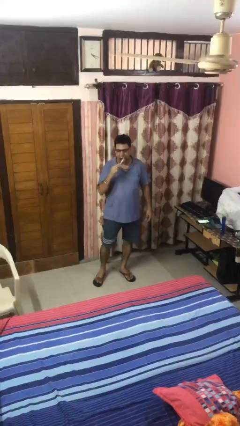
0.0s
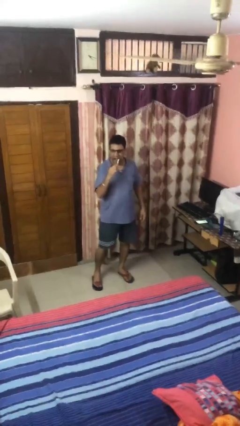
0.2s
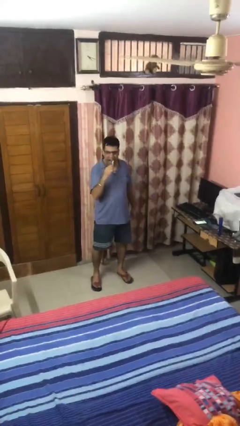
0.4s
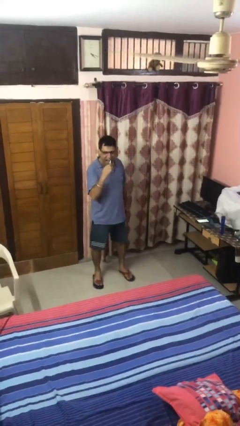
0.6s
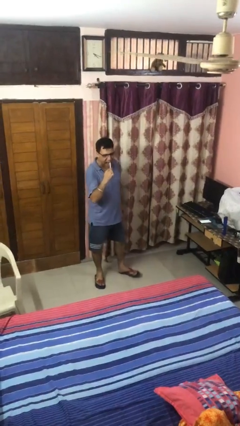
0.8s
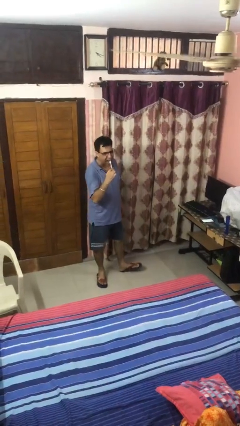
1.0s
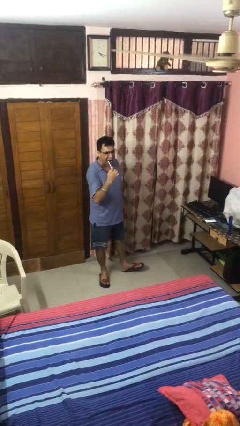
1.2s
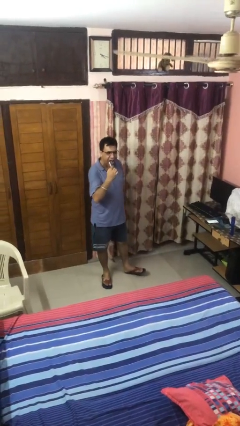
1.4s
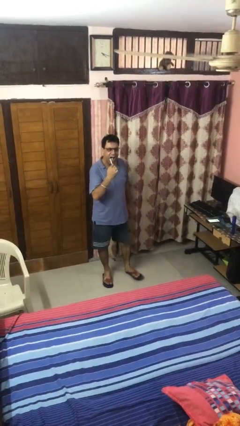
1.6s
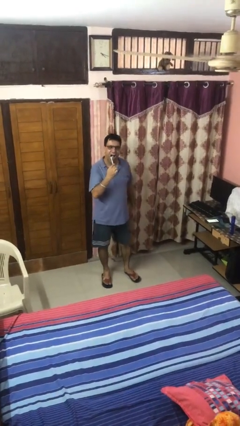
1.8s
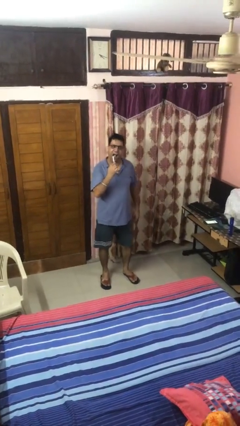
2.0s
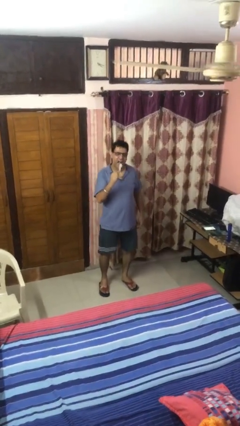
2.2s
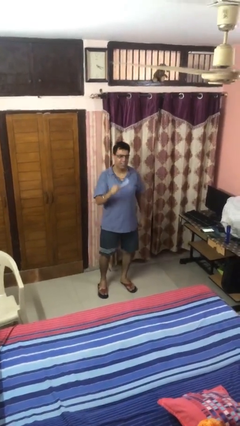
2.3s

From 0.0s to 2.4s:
person brushes teeth

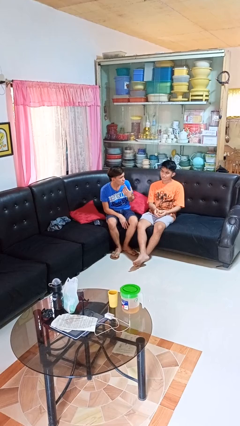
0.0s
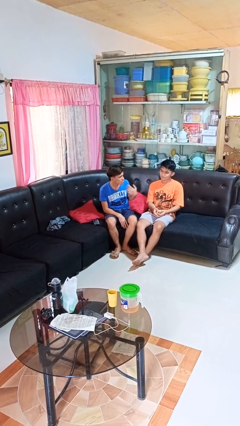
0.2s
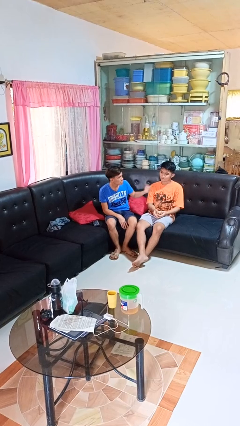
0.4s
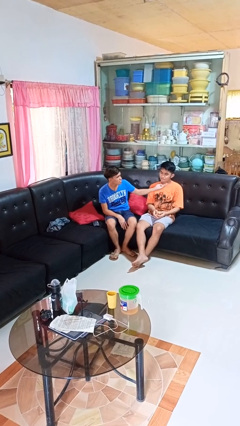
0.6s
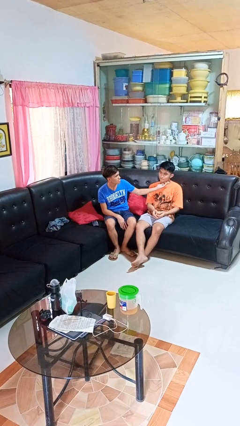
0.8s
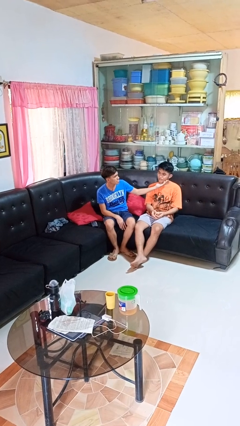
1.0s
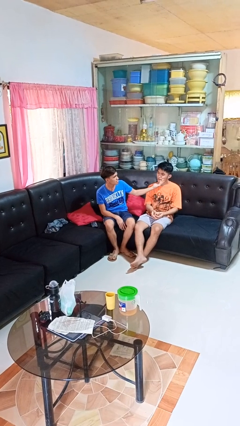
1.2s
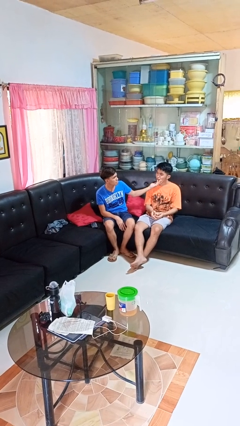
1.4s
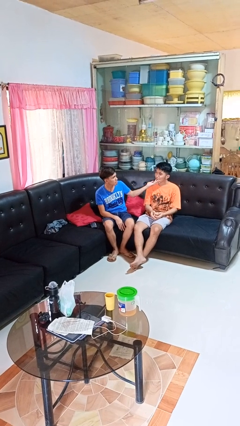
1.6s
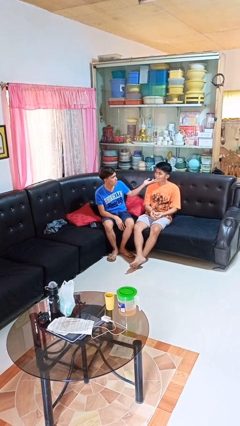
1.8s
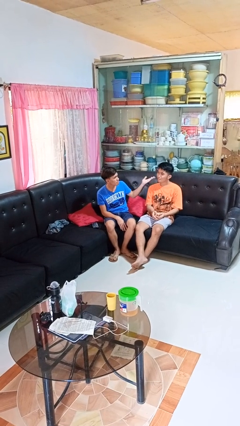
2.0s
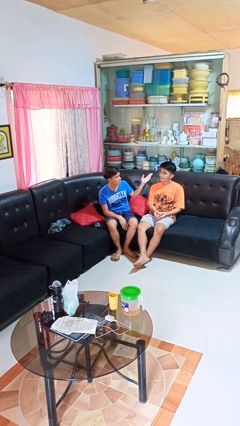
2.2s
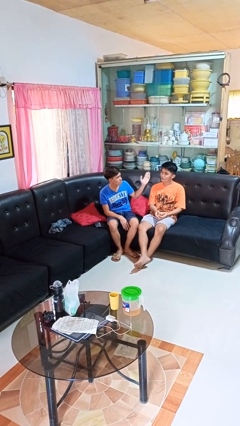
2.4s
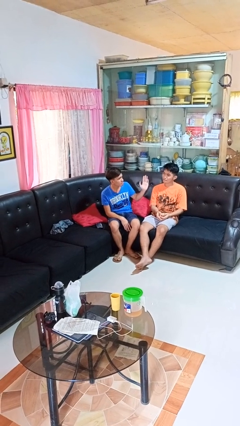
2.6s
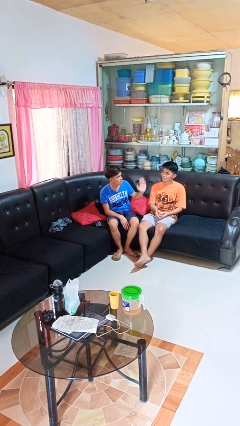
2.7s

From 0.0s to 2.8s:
person touches face of person

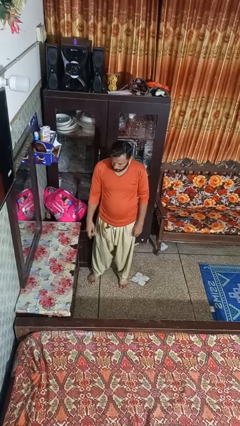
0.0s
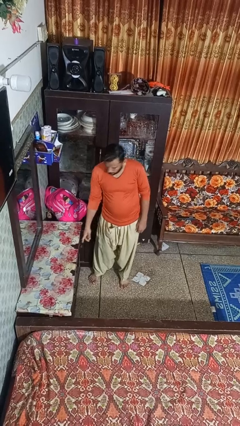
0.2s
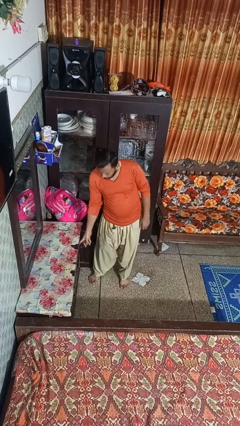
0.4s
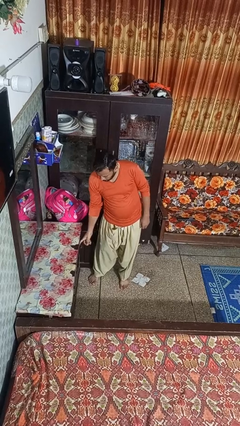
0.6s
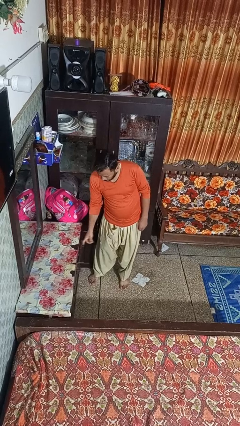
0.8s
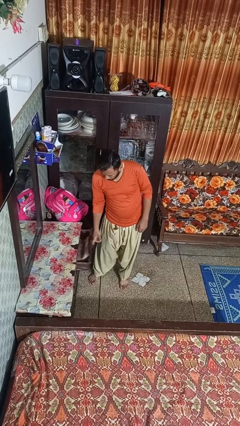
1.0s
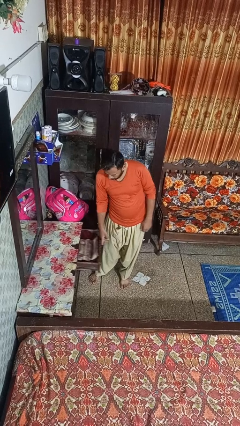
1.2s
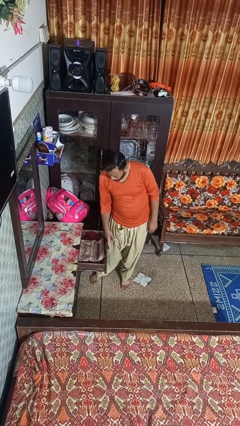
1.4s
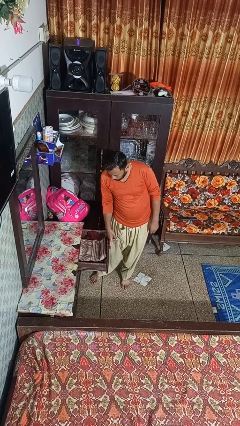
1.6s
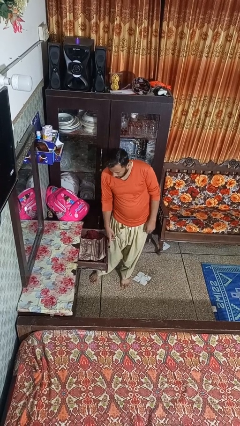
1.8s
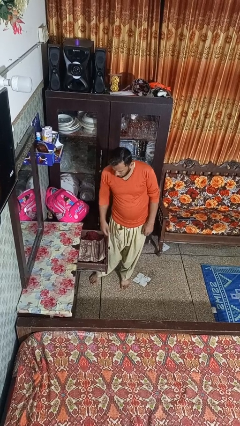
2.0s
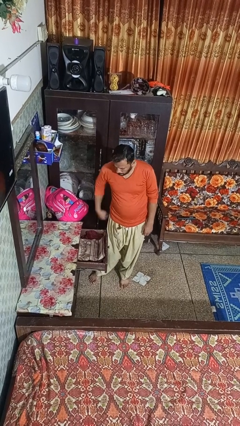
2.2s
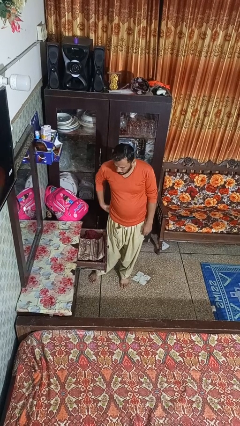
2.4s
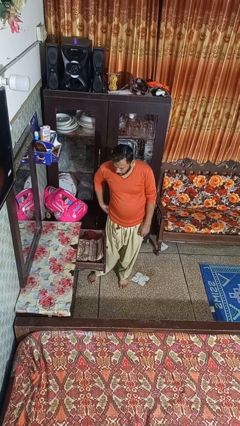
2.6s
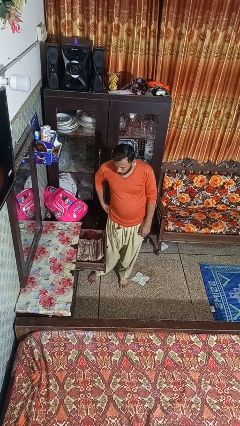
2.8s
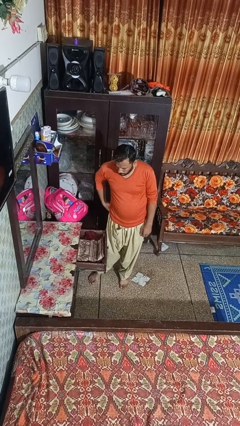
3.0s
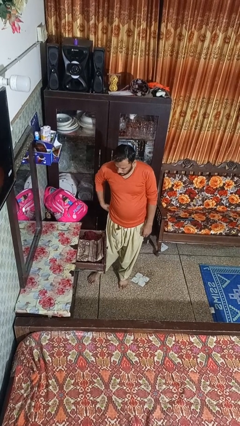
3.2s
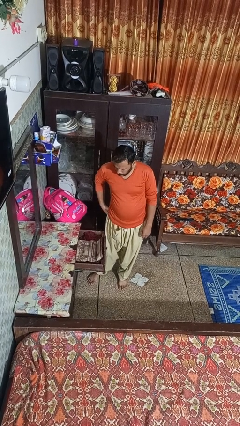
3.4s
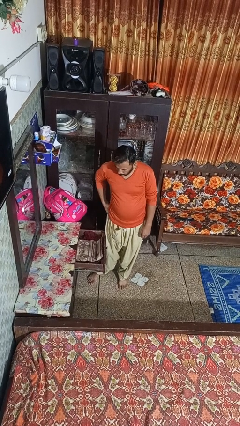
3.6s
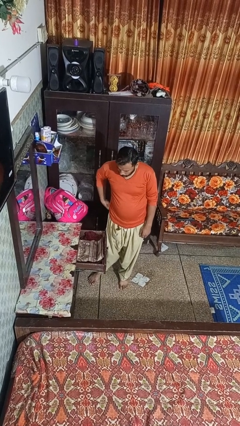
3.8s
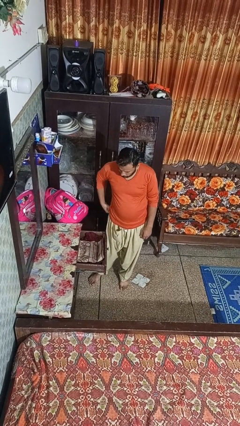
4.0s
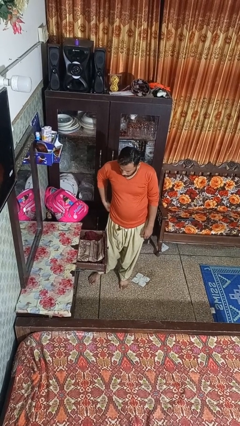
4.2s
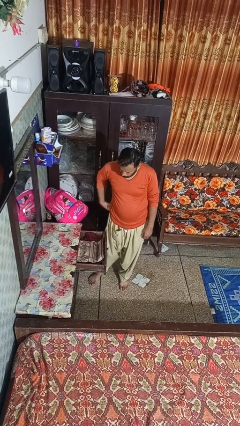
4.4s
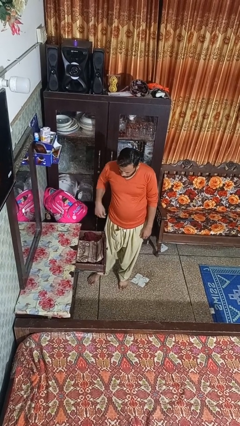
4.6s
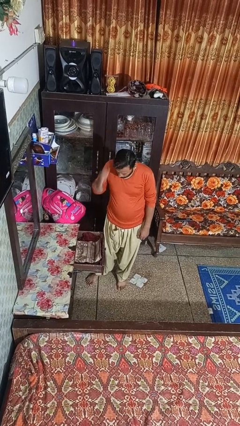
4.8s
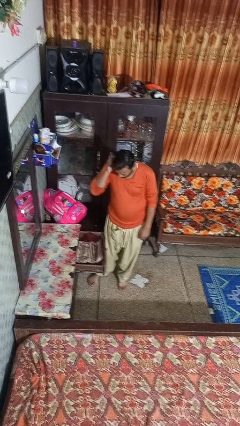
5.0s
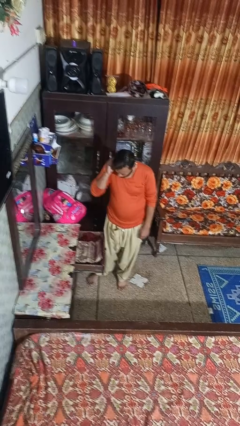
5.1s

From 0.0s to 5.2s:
person opens dresser drawer

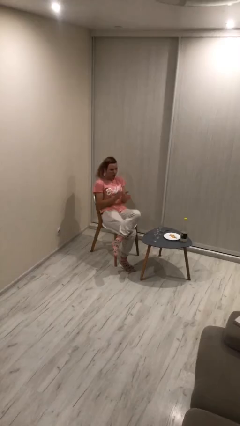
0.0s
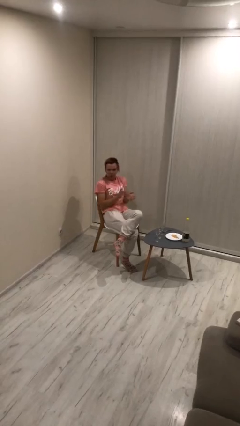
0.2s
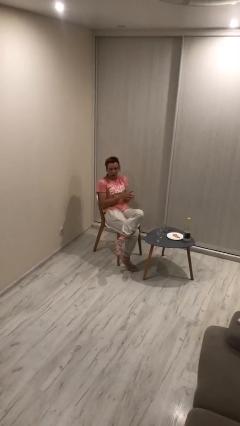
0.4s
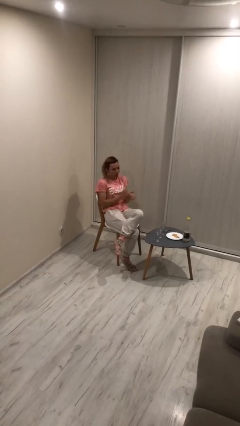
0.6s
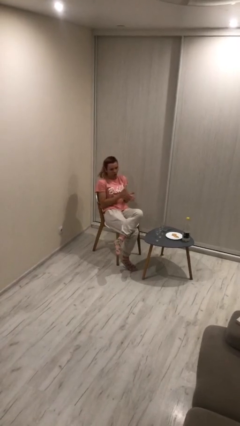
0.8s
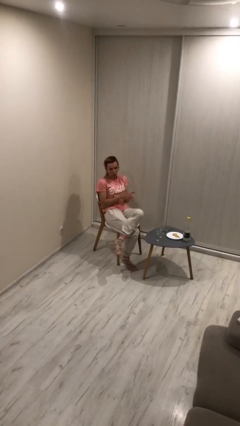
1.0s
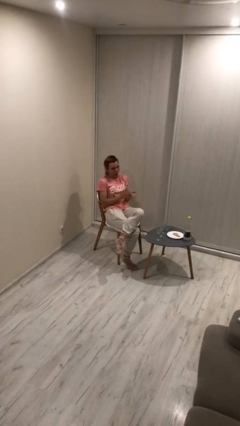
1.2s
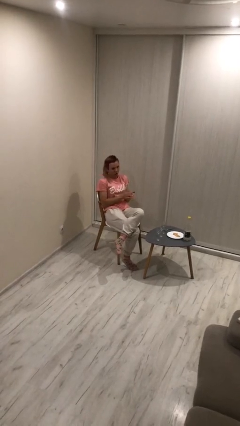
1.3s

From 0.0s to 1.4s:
person claps hands

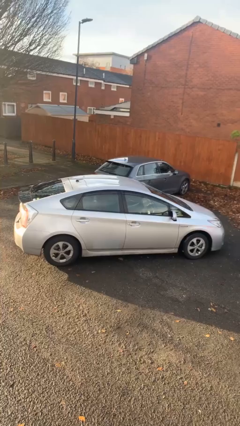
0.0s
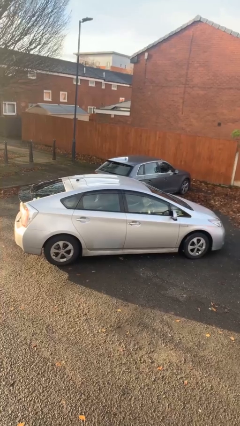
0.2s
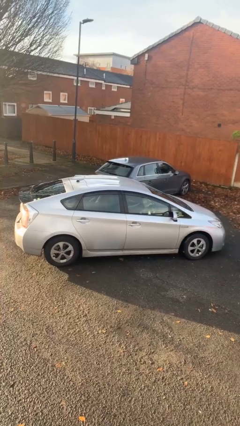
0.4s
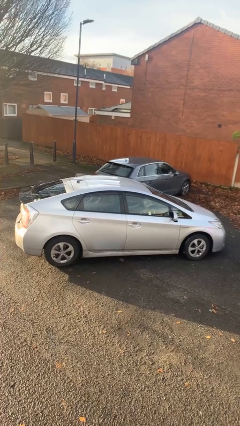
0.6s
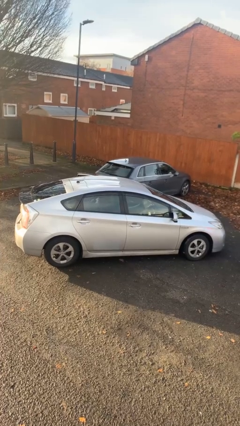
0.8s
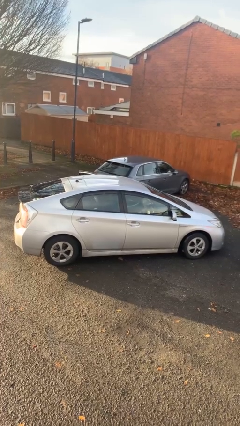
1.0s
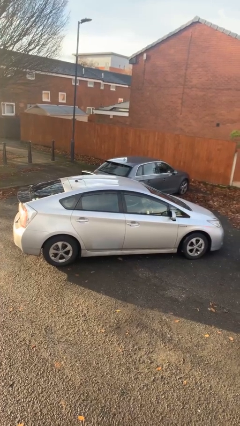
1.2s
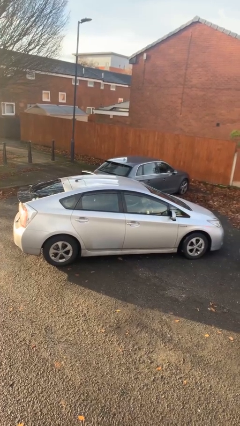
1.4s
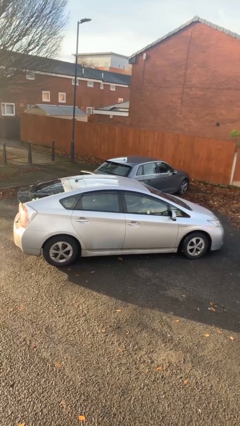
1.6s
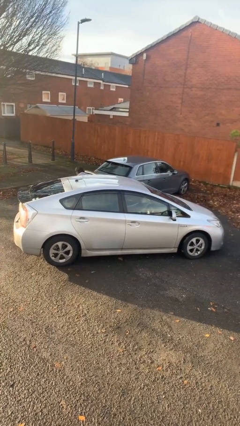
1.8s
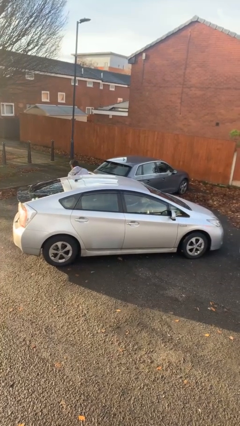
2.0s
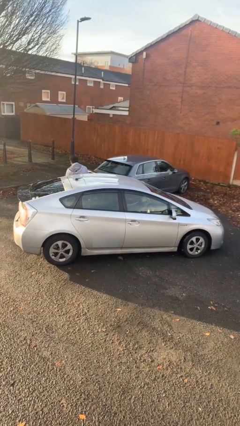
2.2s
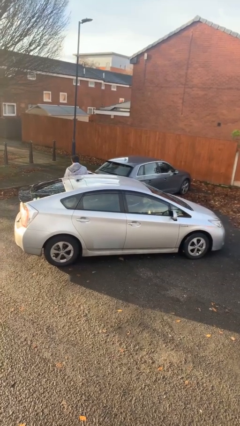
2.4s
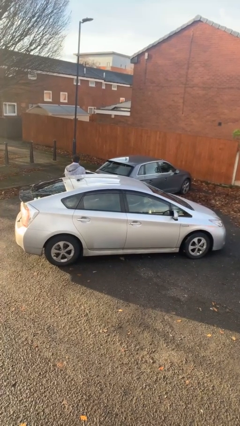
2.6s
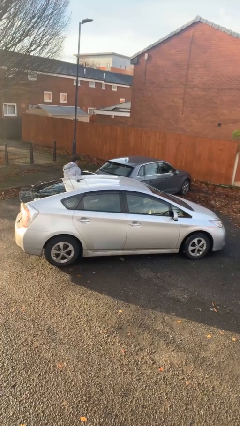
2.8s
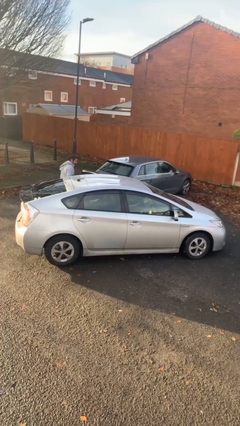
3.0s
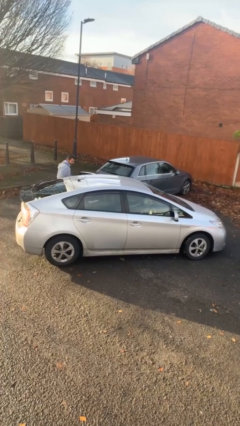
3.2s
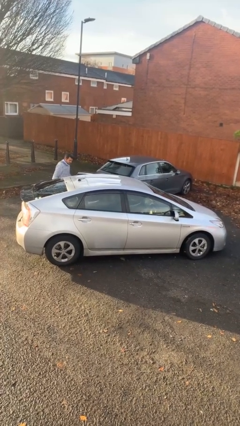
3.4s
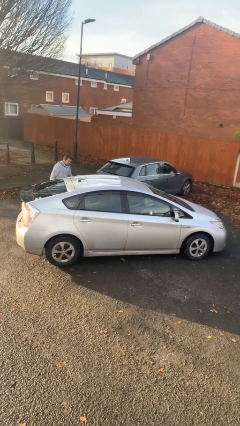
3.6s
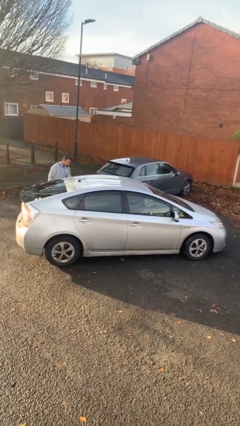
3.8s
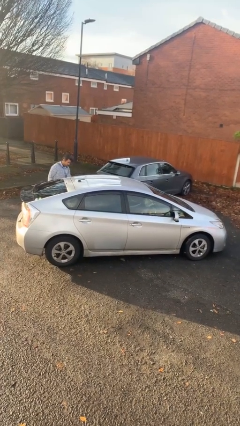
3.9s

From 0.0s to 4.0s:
car drops off person

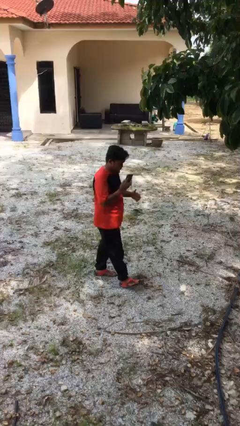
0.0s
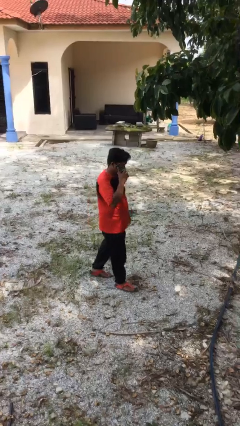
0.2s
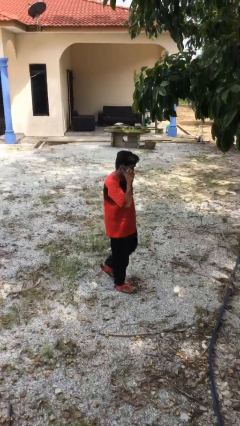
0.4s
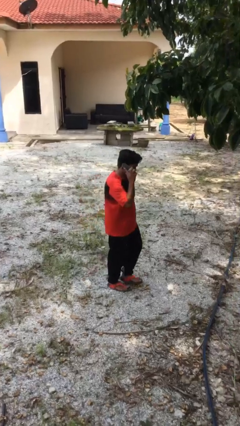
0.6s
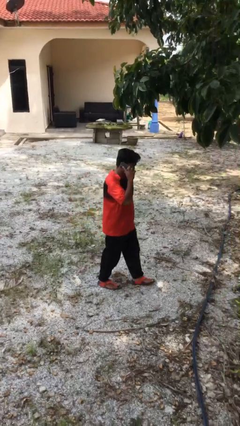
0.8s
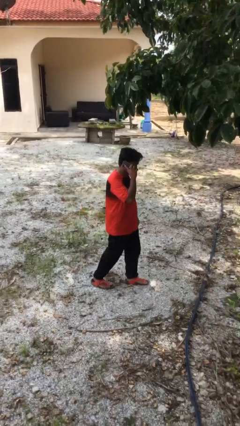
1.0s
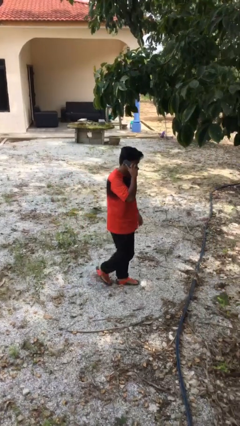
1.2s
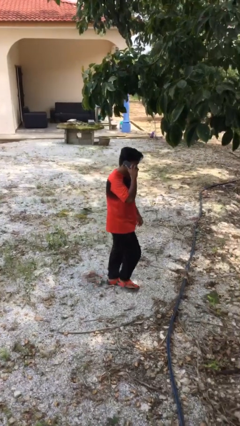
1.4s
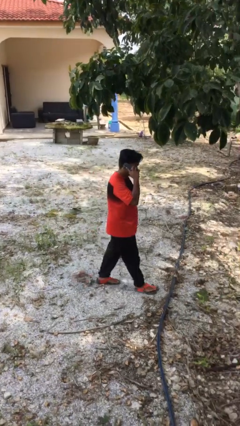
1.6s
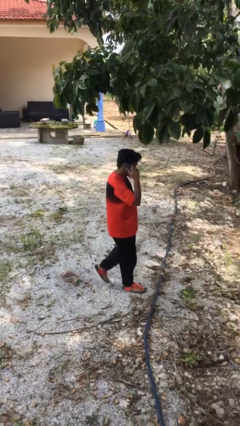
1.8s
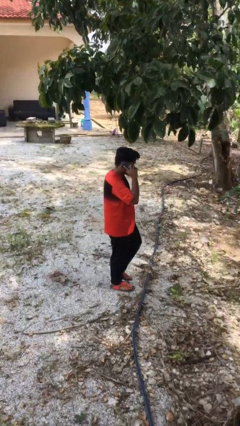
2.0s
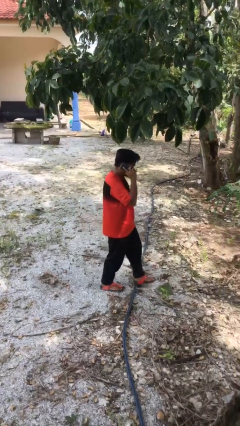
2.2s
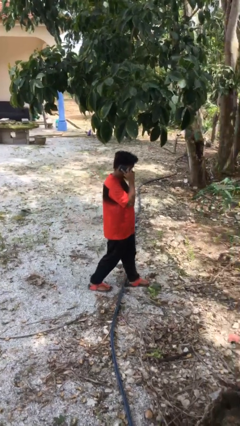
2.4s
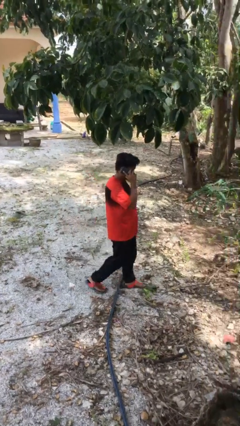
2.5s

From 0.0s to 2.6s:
person talks on phone
